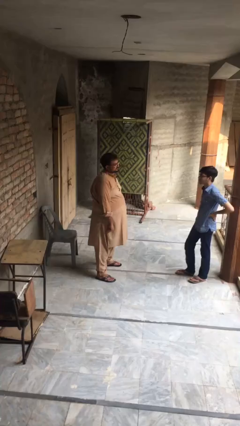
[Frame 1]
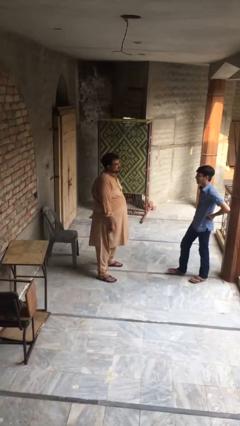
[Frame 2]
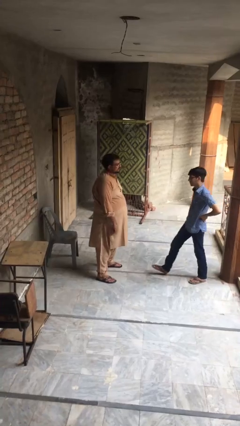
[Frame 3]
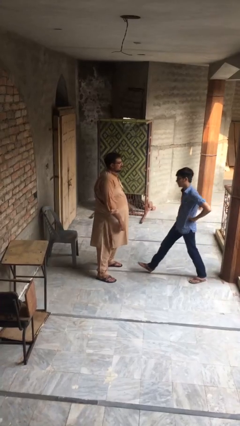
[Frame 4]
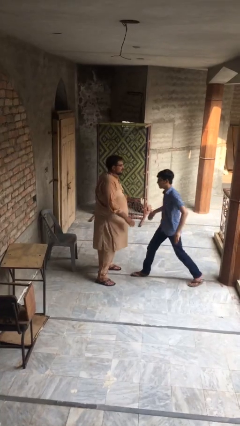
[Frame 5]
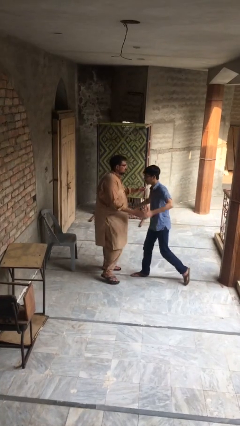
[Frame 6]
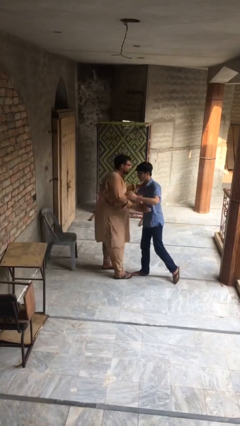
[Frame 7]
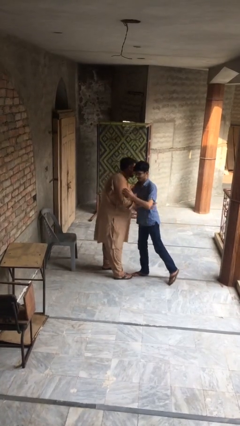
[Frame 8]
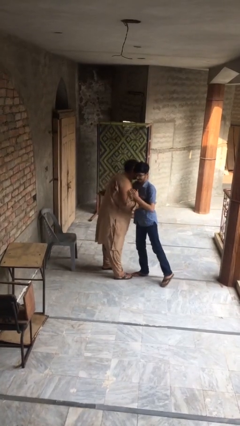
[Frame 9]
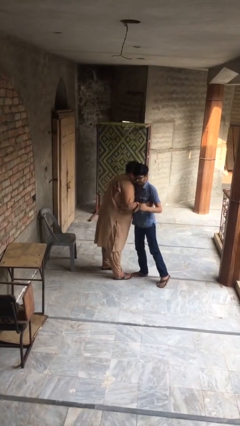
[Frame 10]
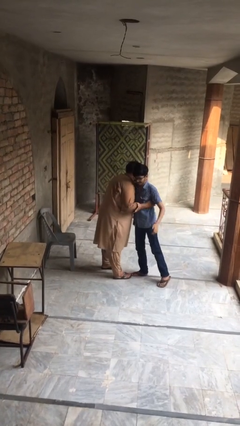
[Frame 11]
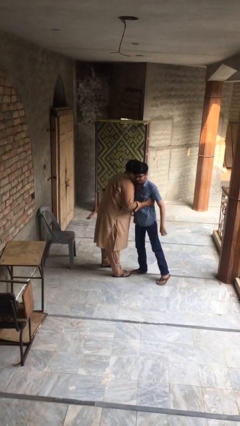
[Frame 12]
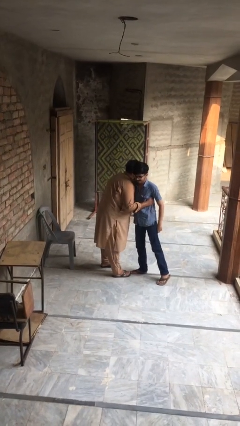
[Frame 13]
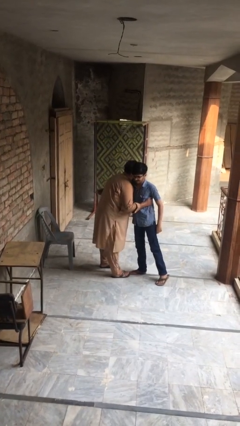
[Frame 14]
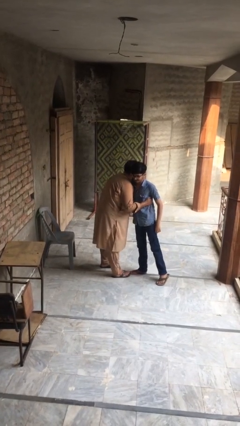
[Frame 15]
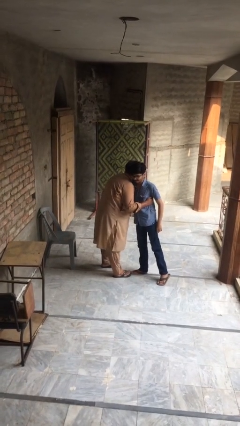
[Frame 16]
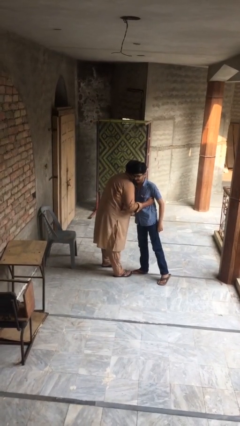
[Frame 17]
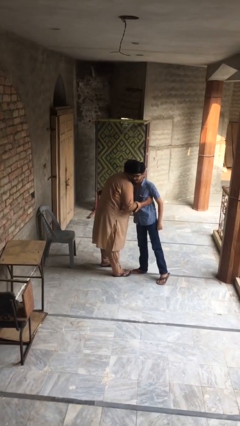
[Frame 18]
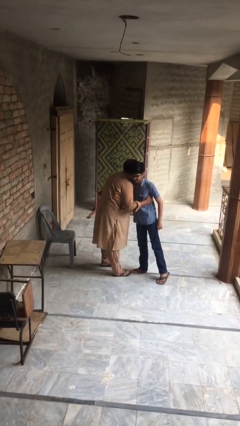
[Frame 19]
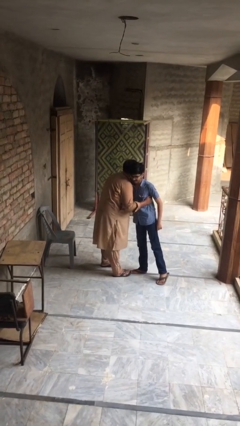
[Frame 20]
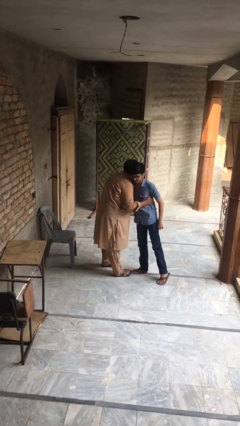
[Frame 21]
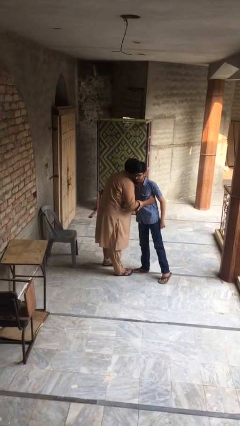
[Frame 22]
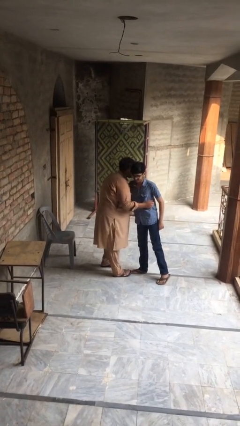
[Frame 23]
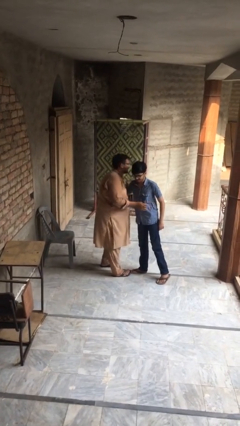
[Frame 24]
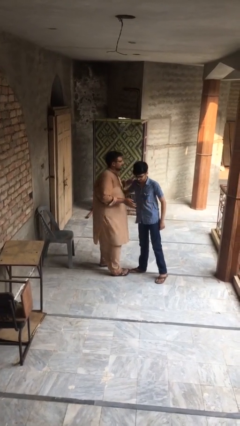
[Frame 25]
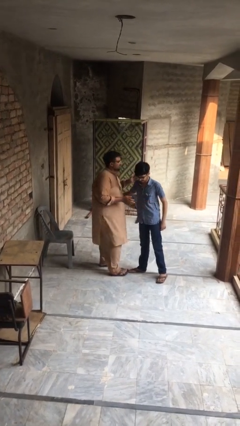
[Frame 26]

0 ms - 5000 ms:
person embraces person

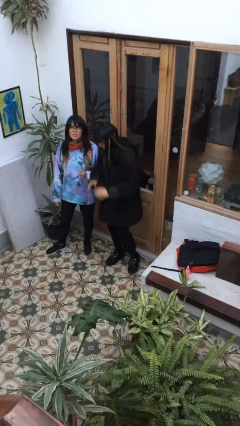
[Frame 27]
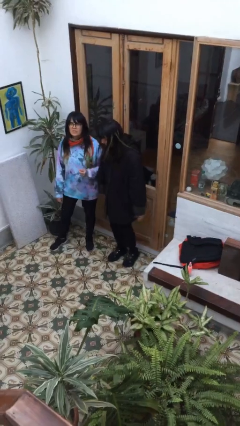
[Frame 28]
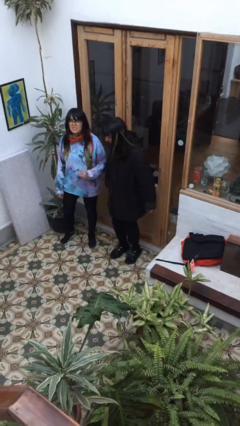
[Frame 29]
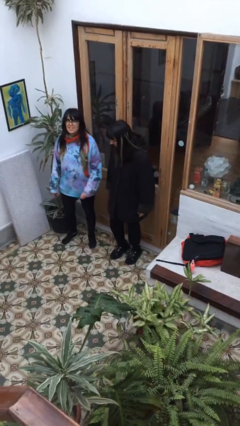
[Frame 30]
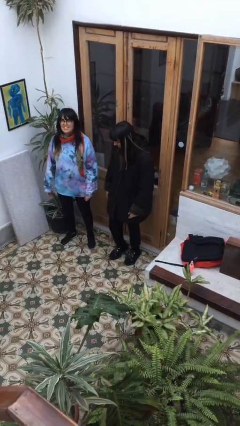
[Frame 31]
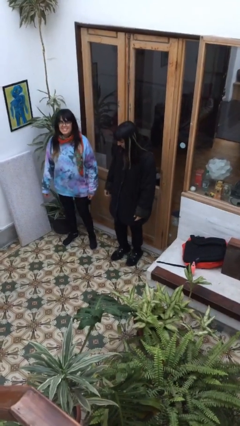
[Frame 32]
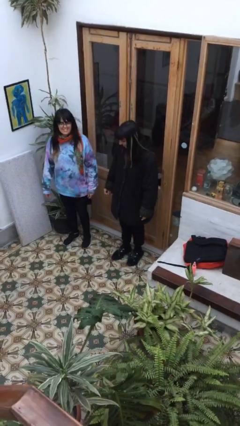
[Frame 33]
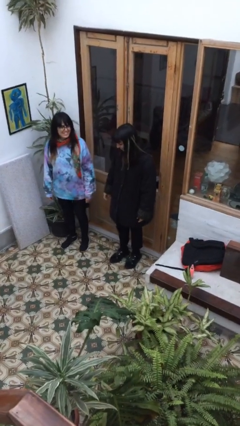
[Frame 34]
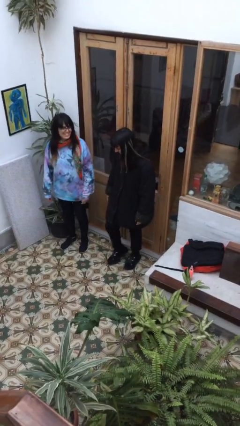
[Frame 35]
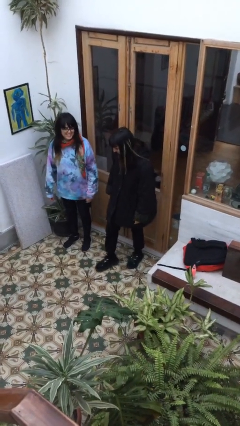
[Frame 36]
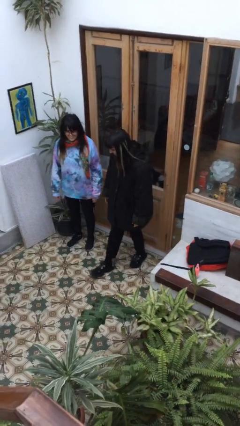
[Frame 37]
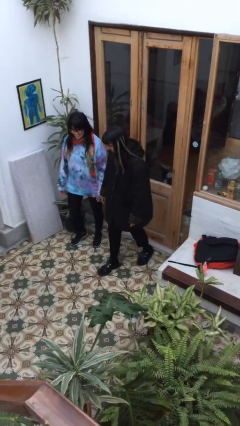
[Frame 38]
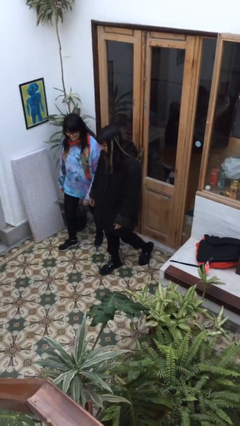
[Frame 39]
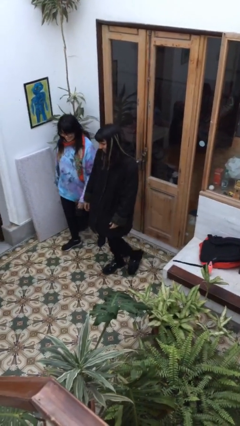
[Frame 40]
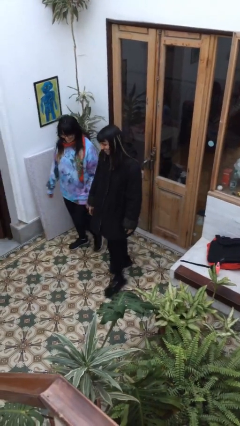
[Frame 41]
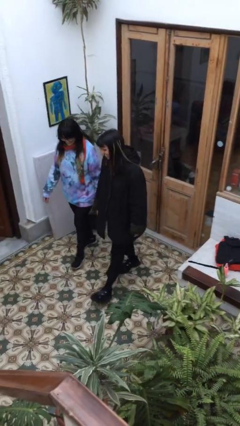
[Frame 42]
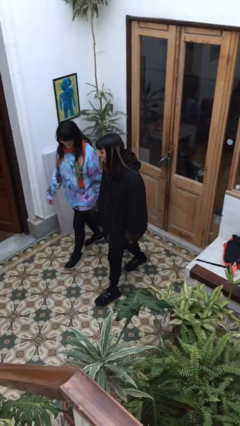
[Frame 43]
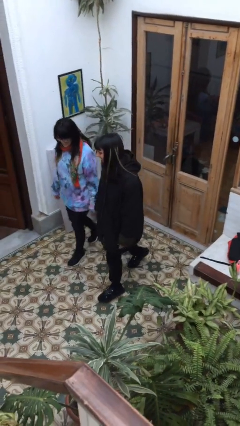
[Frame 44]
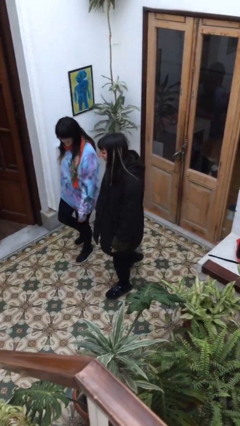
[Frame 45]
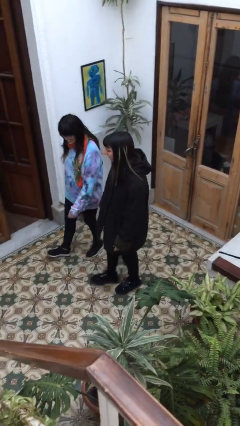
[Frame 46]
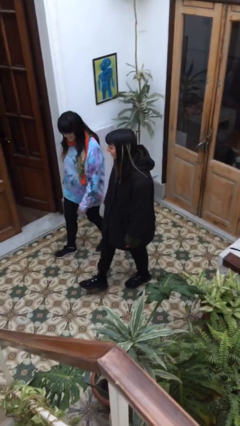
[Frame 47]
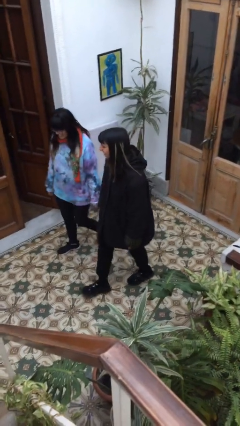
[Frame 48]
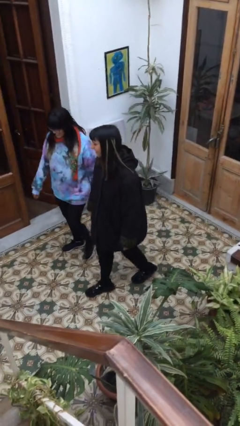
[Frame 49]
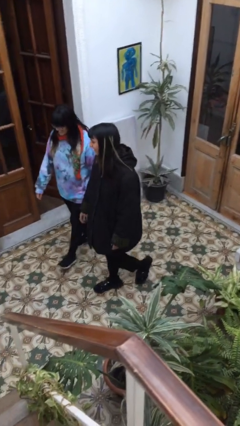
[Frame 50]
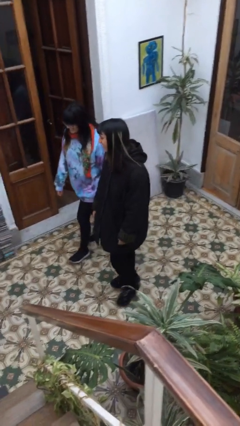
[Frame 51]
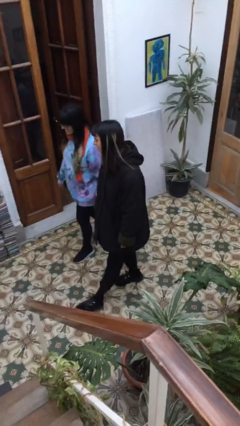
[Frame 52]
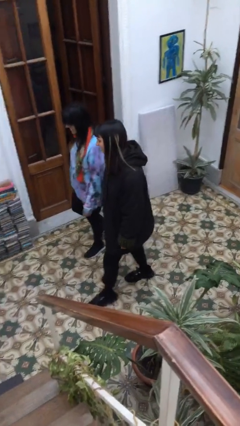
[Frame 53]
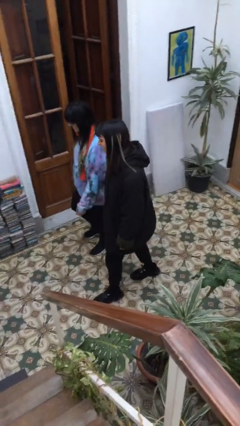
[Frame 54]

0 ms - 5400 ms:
person talks to person

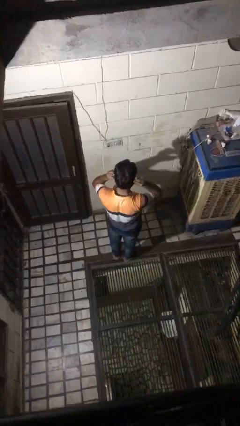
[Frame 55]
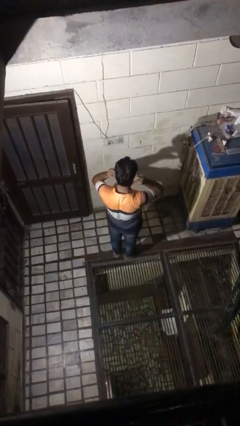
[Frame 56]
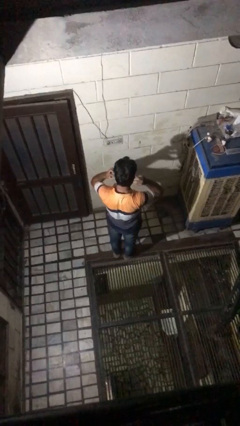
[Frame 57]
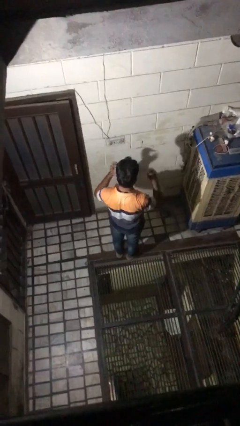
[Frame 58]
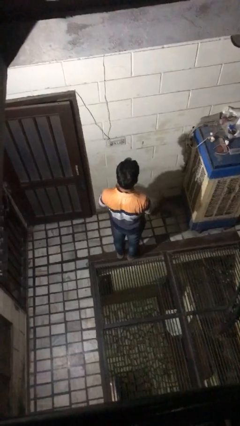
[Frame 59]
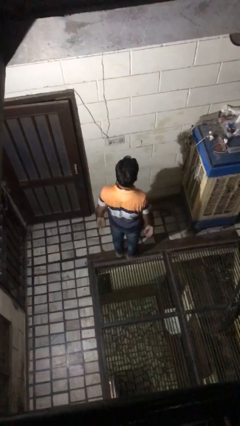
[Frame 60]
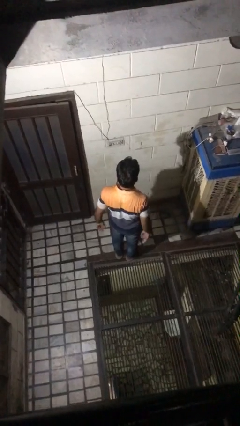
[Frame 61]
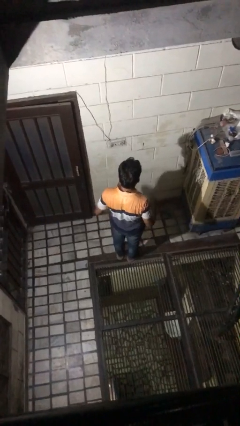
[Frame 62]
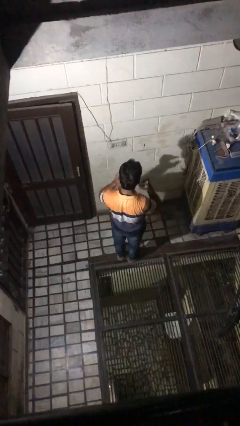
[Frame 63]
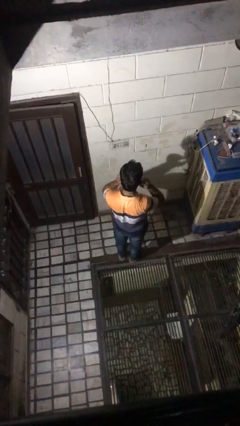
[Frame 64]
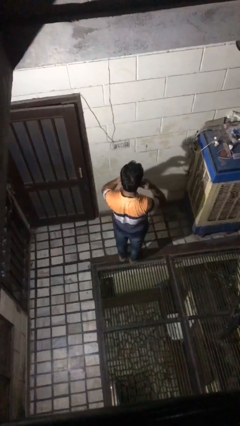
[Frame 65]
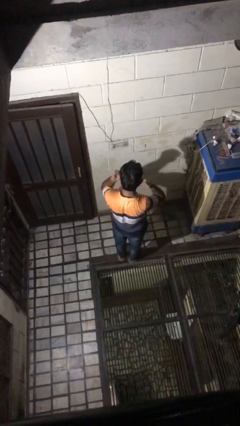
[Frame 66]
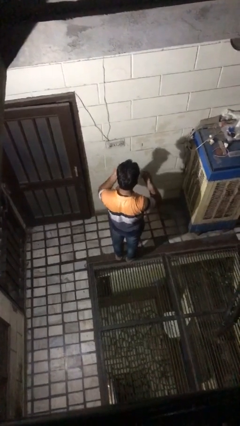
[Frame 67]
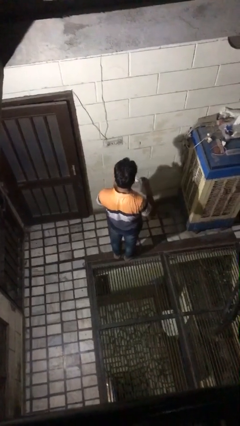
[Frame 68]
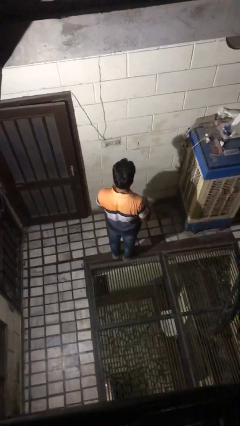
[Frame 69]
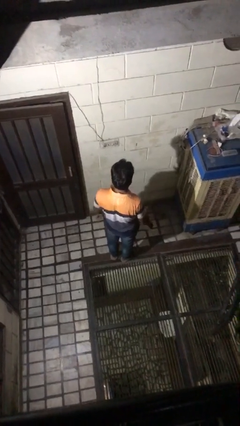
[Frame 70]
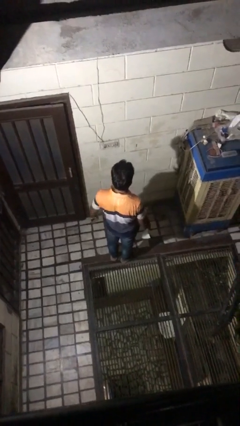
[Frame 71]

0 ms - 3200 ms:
person takes off facemask

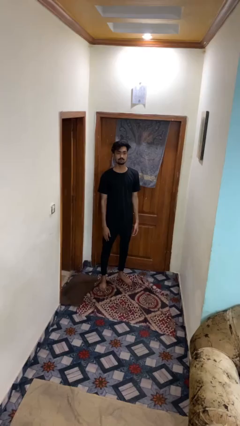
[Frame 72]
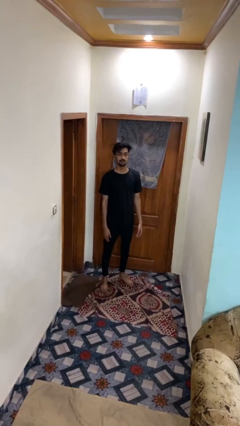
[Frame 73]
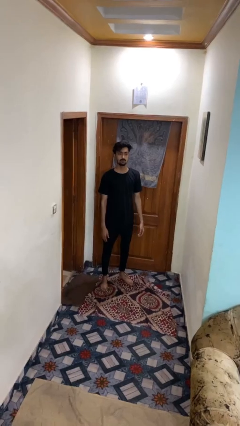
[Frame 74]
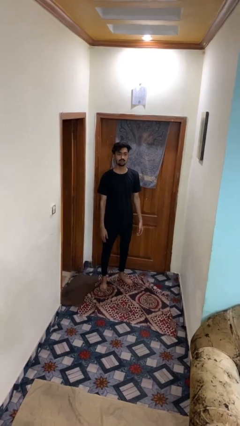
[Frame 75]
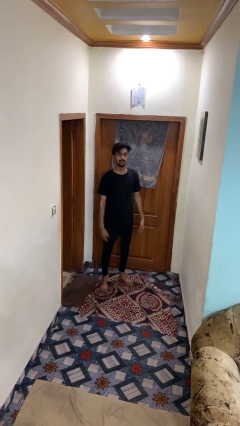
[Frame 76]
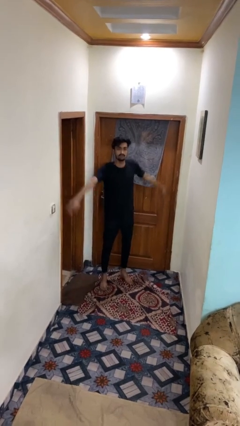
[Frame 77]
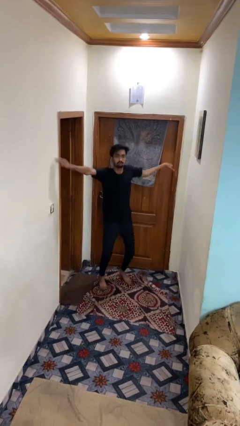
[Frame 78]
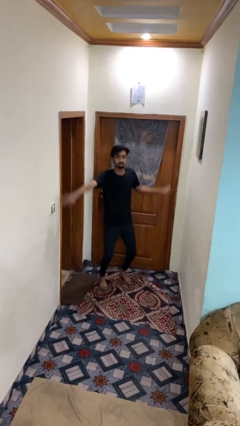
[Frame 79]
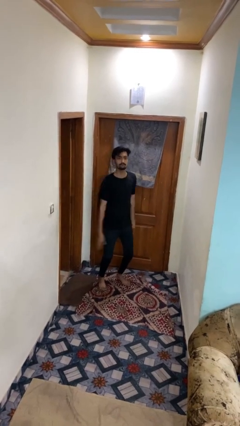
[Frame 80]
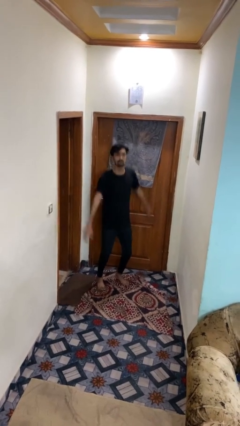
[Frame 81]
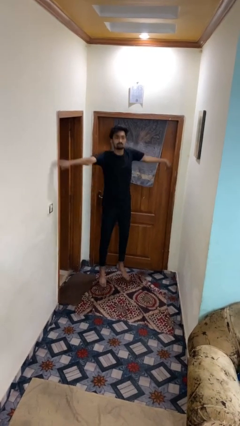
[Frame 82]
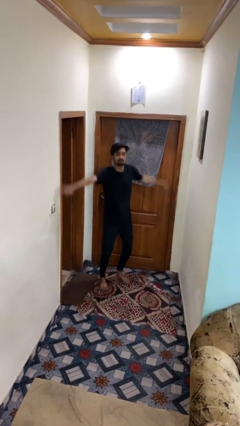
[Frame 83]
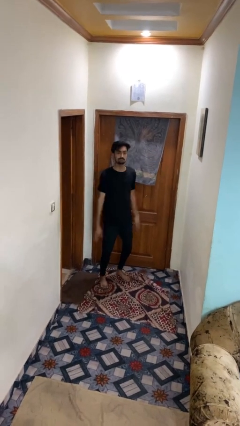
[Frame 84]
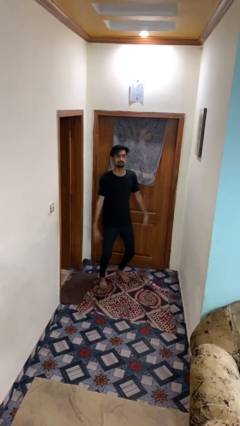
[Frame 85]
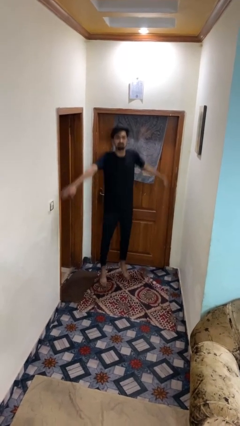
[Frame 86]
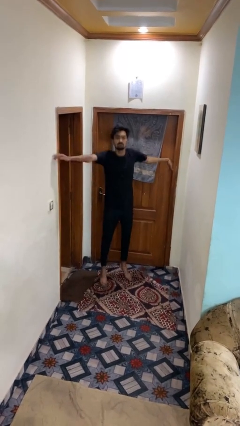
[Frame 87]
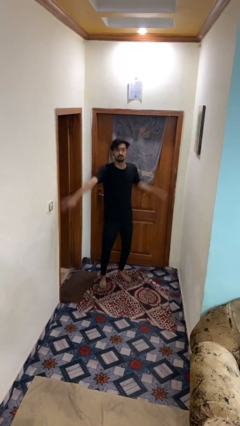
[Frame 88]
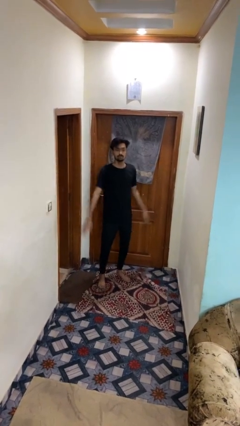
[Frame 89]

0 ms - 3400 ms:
person exercises with jumping jacks

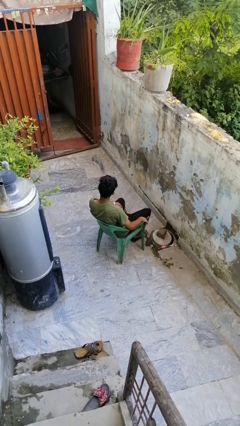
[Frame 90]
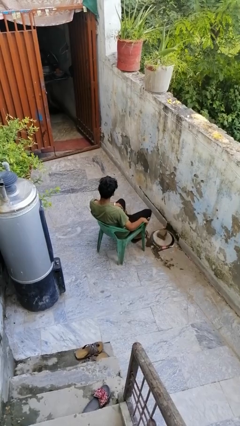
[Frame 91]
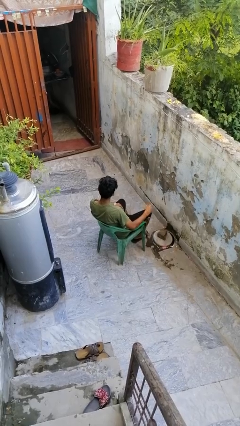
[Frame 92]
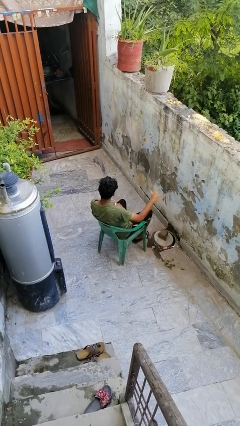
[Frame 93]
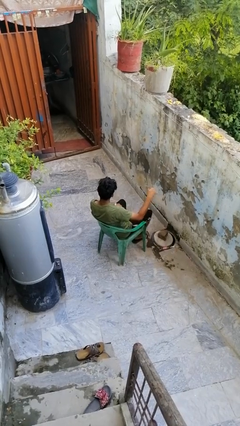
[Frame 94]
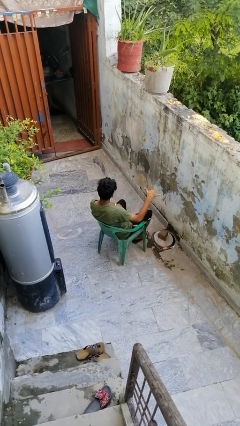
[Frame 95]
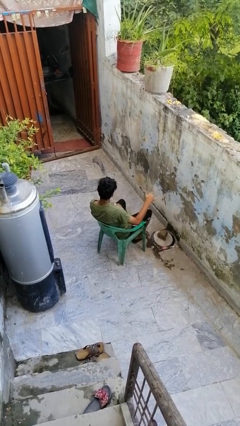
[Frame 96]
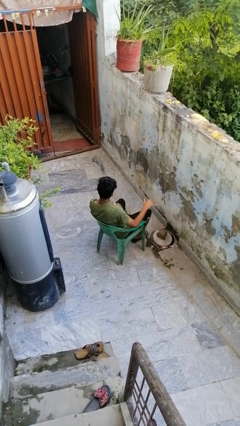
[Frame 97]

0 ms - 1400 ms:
person gestures hang loose
